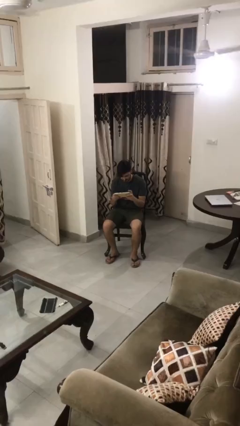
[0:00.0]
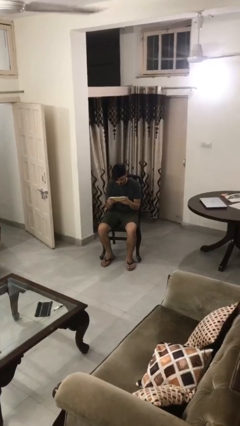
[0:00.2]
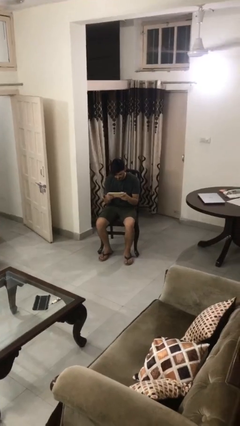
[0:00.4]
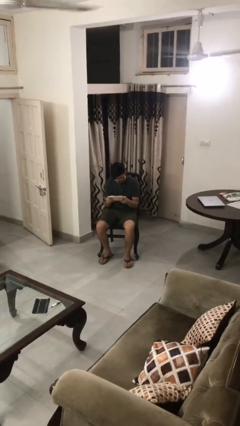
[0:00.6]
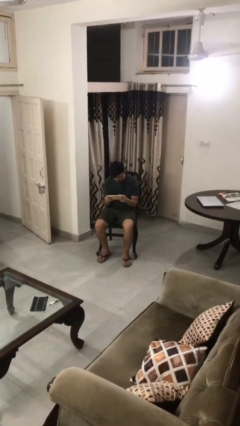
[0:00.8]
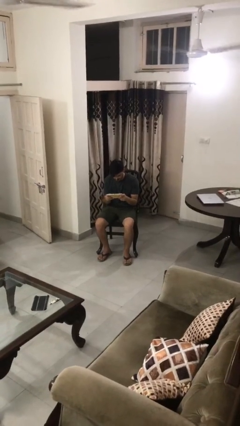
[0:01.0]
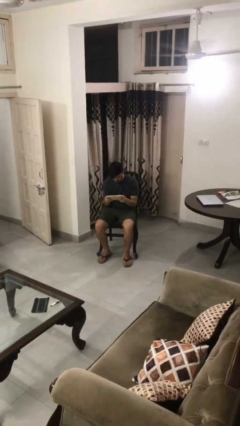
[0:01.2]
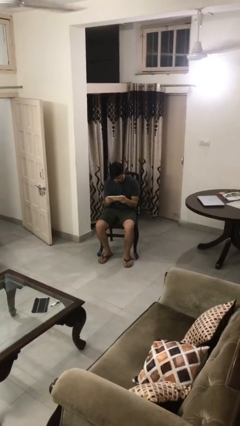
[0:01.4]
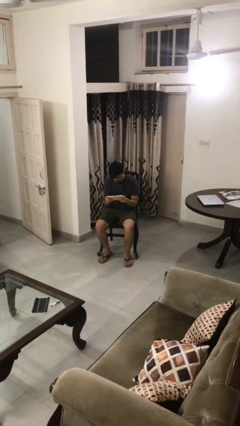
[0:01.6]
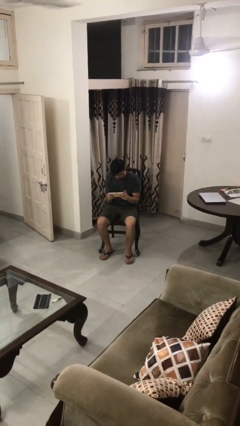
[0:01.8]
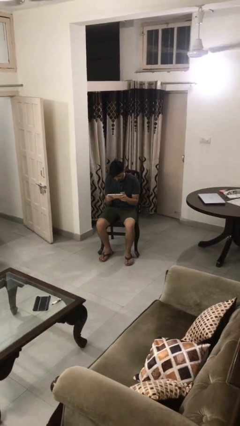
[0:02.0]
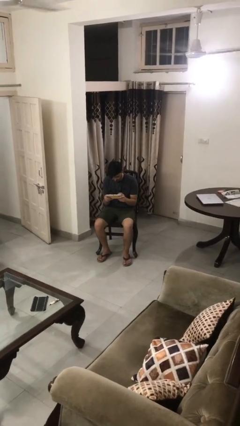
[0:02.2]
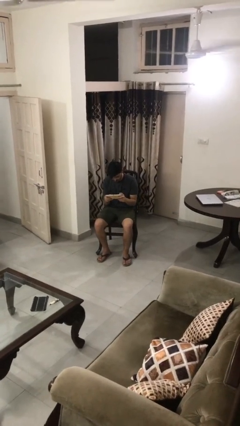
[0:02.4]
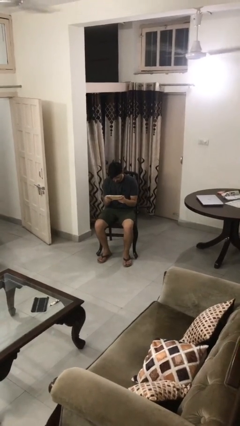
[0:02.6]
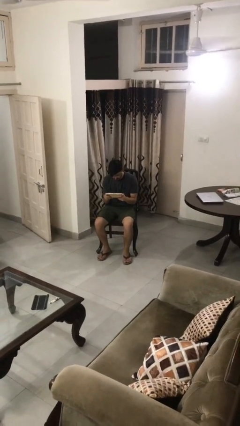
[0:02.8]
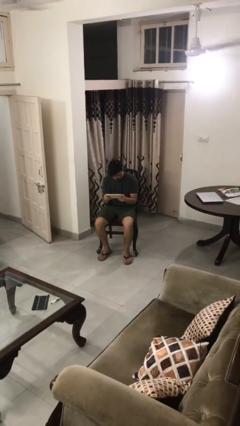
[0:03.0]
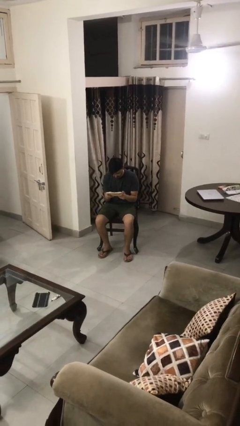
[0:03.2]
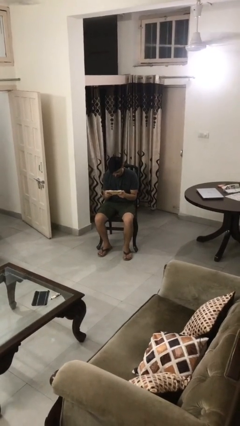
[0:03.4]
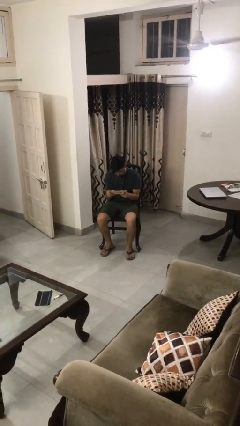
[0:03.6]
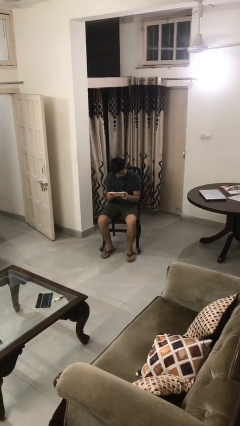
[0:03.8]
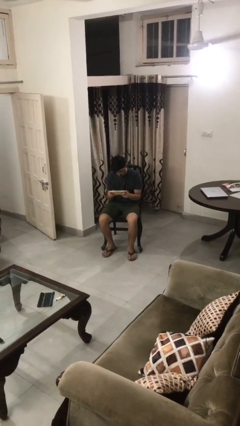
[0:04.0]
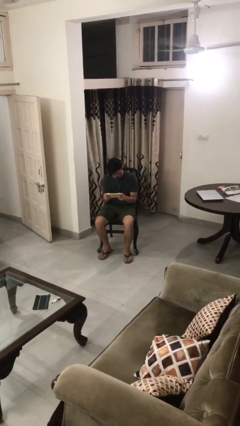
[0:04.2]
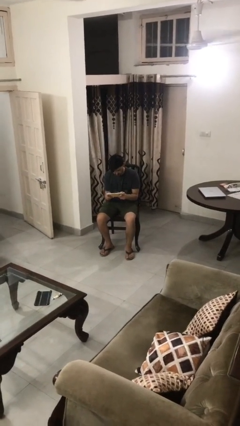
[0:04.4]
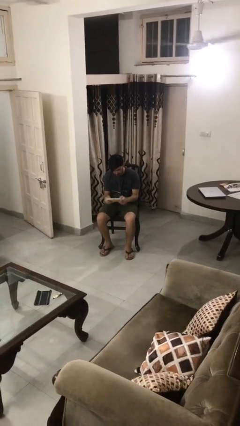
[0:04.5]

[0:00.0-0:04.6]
person interacts with handheld game

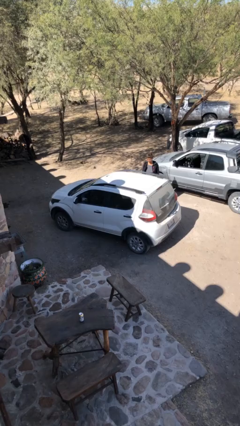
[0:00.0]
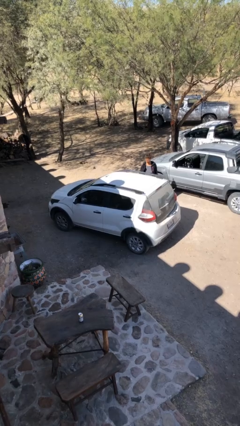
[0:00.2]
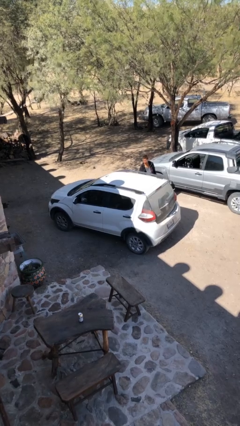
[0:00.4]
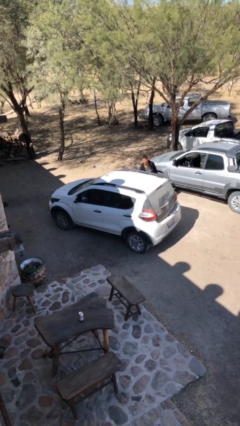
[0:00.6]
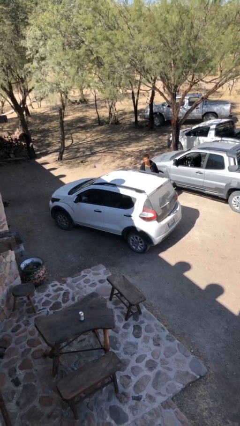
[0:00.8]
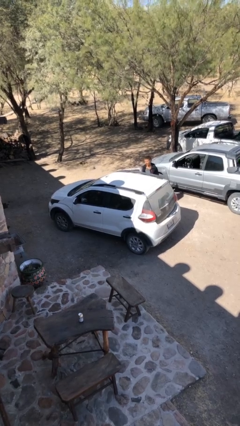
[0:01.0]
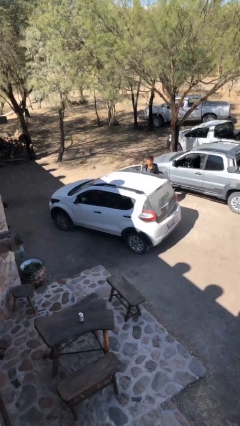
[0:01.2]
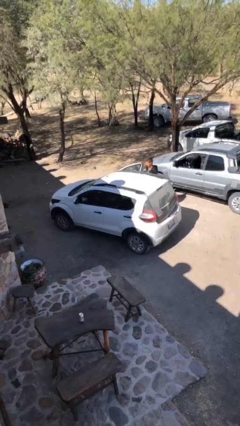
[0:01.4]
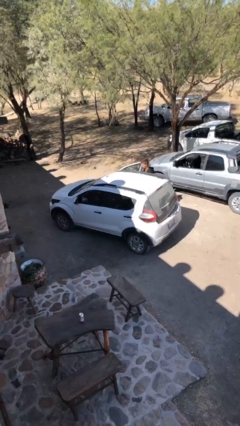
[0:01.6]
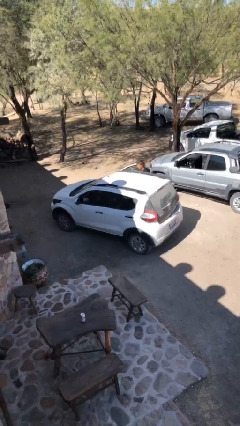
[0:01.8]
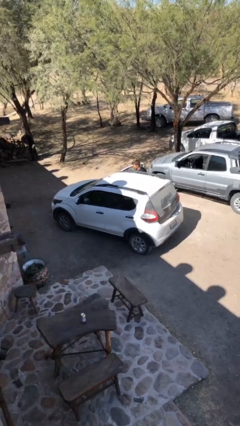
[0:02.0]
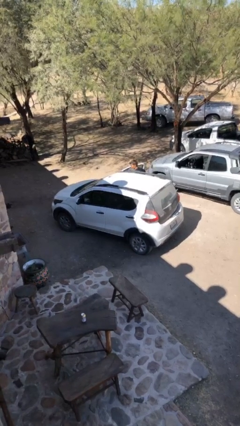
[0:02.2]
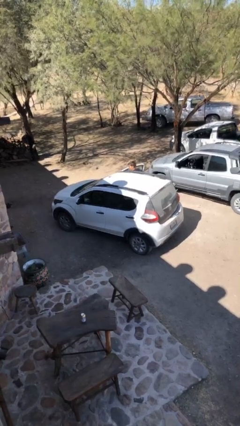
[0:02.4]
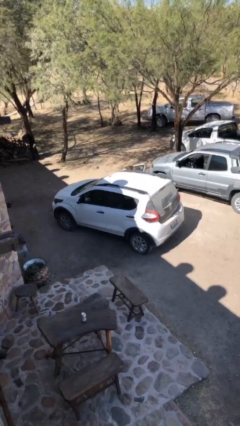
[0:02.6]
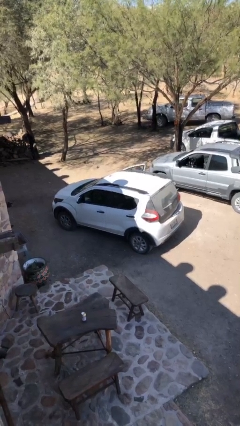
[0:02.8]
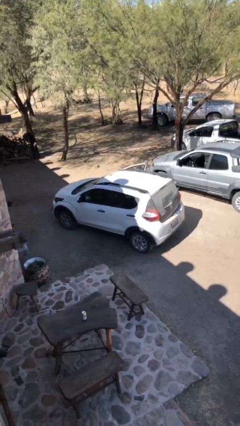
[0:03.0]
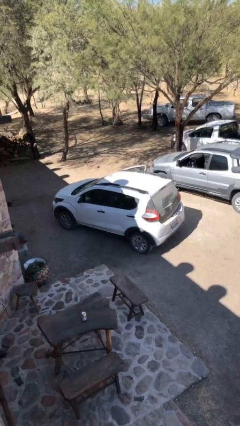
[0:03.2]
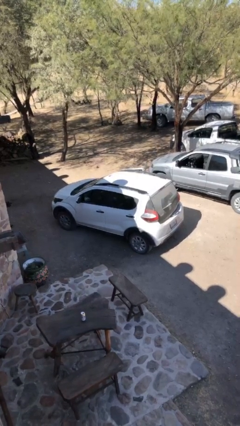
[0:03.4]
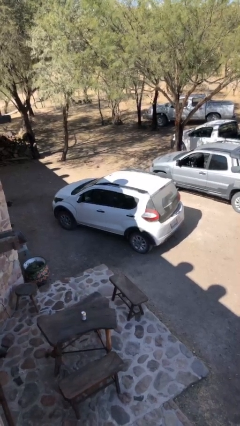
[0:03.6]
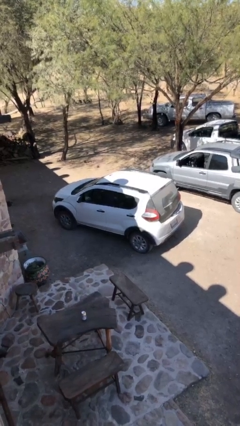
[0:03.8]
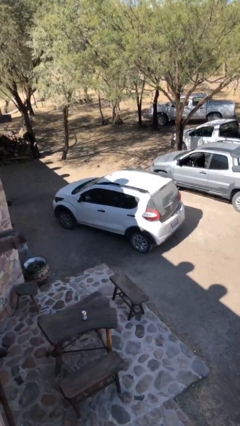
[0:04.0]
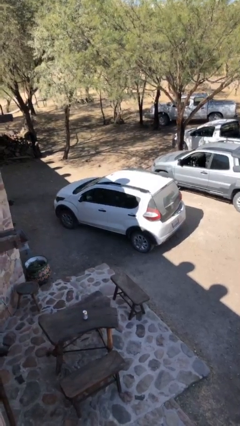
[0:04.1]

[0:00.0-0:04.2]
car picks up person

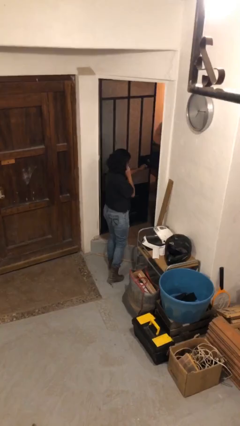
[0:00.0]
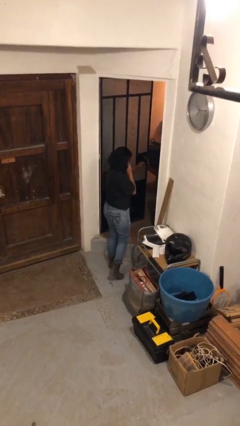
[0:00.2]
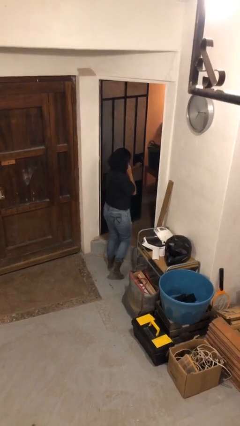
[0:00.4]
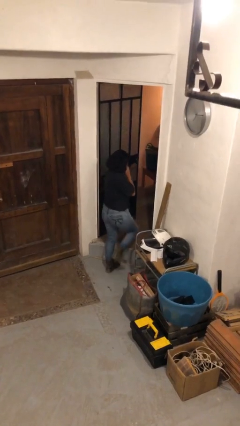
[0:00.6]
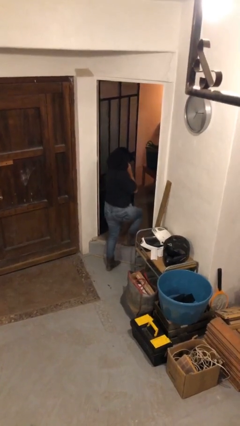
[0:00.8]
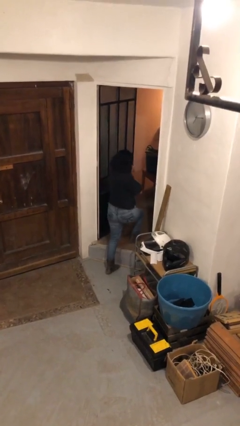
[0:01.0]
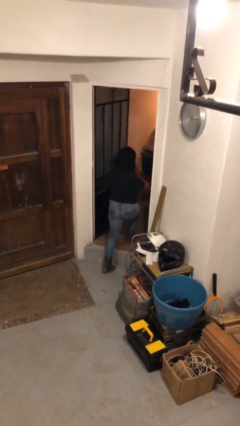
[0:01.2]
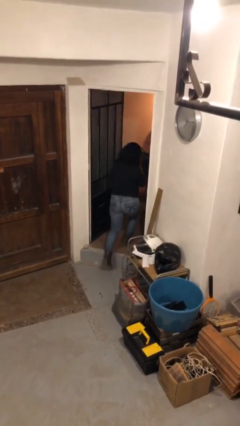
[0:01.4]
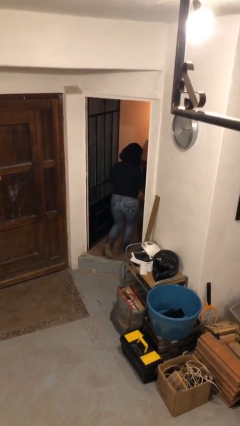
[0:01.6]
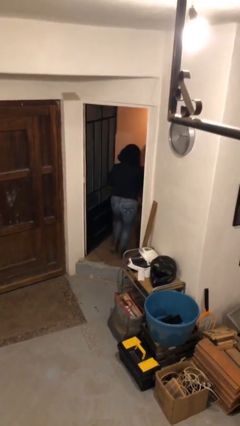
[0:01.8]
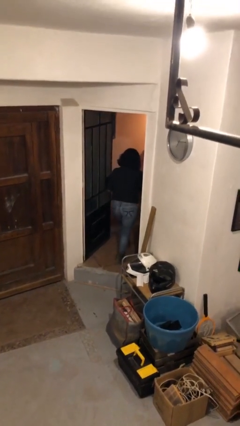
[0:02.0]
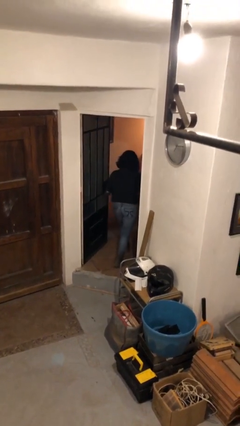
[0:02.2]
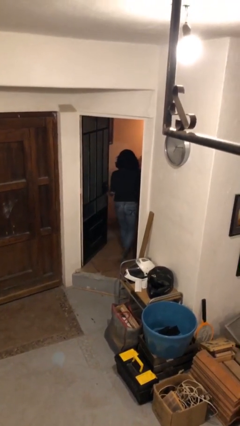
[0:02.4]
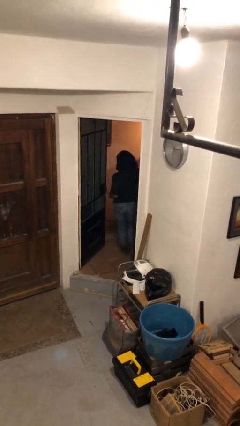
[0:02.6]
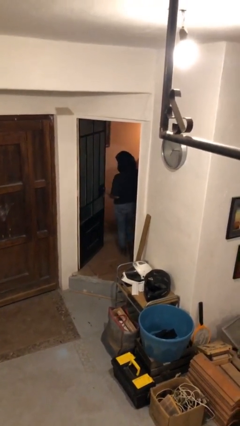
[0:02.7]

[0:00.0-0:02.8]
person exits scene through structure

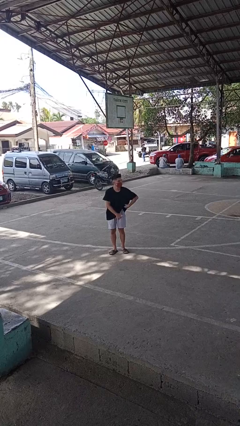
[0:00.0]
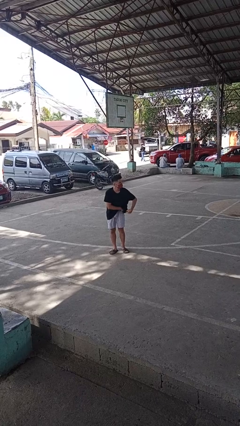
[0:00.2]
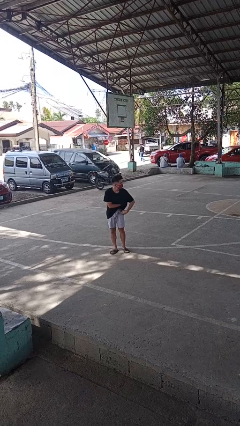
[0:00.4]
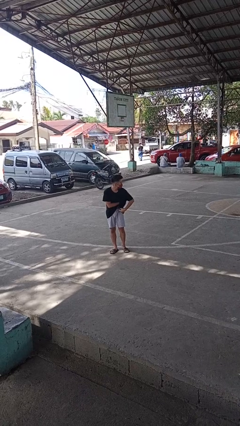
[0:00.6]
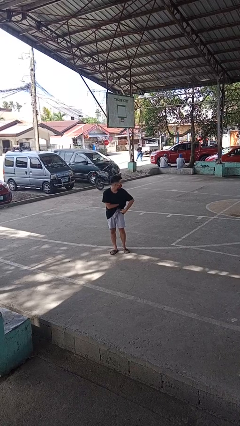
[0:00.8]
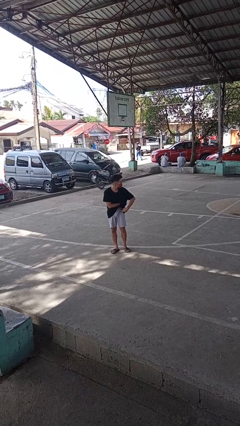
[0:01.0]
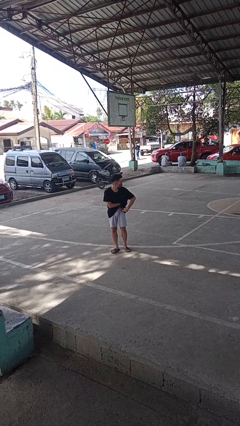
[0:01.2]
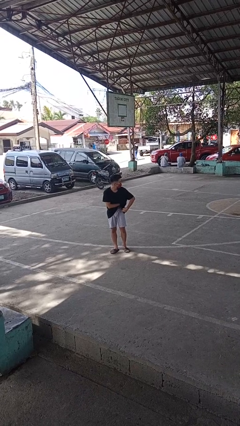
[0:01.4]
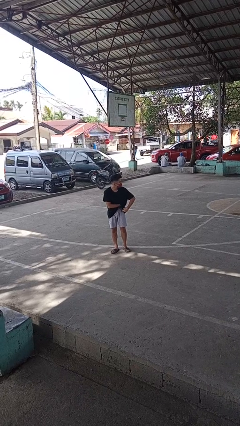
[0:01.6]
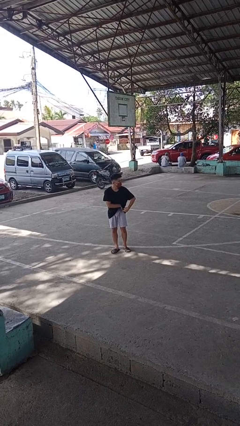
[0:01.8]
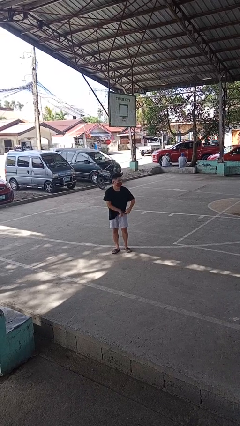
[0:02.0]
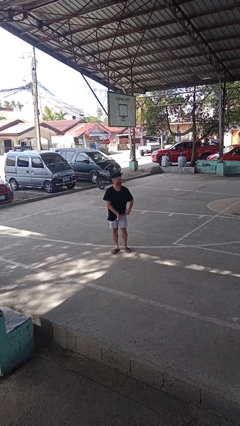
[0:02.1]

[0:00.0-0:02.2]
person applies deodorant

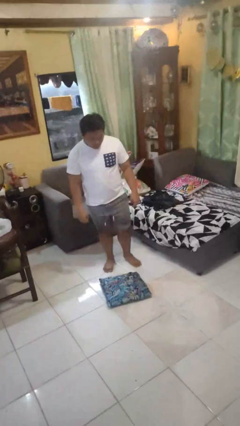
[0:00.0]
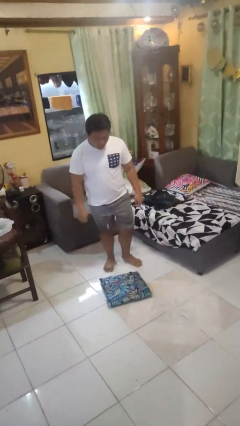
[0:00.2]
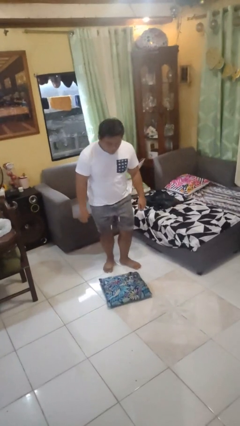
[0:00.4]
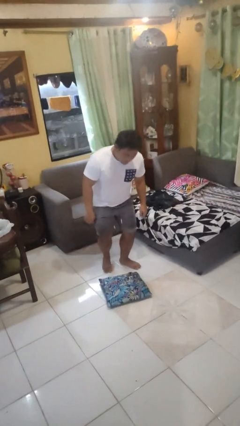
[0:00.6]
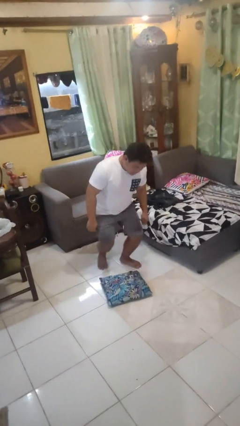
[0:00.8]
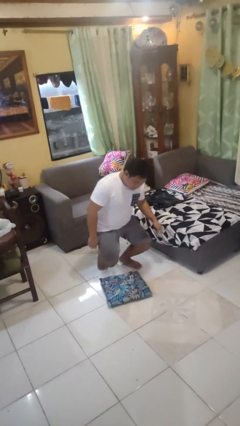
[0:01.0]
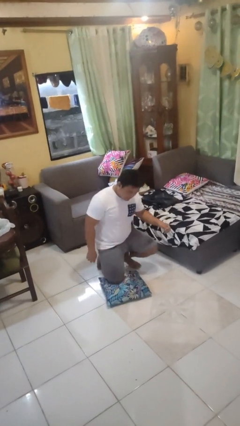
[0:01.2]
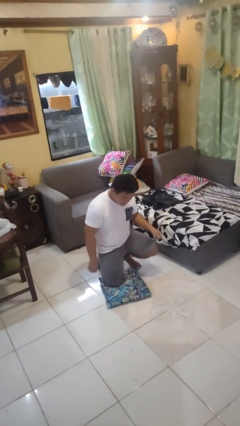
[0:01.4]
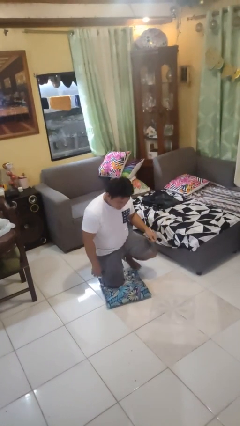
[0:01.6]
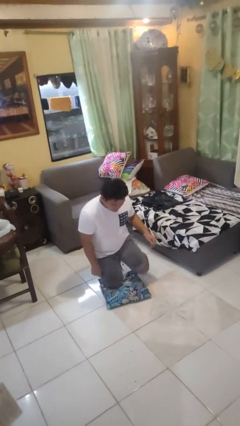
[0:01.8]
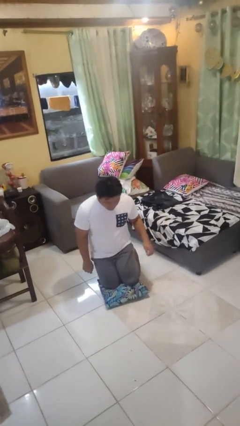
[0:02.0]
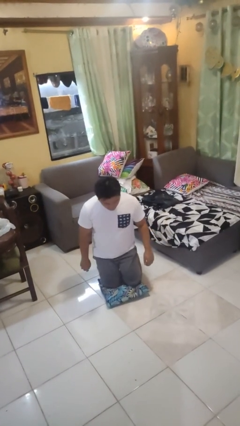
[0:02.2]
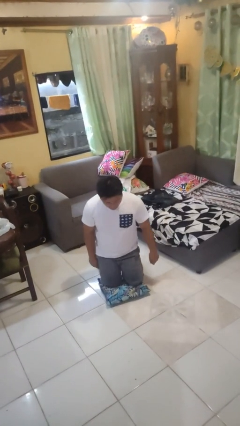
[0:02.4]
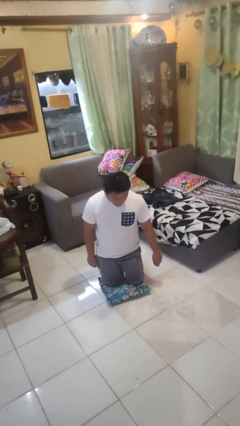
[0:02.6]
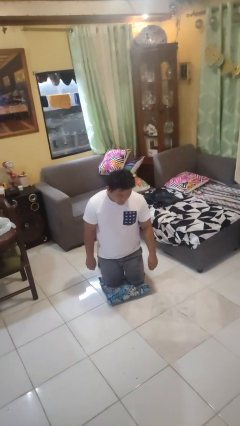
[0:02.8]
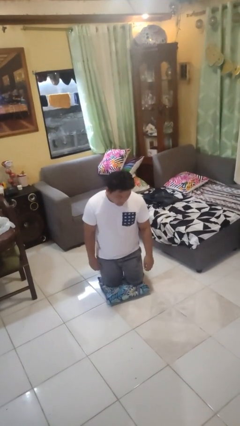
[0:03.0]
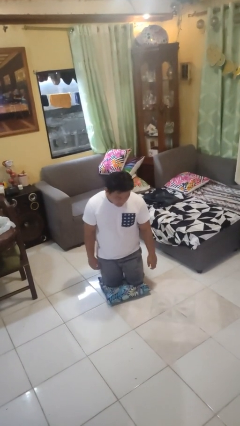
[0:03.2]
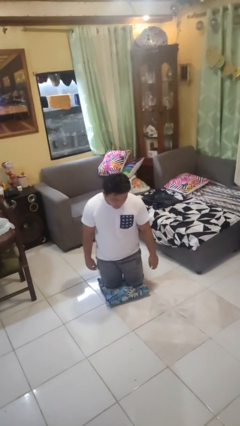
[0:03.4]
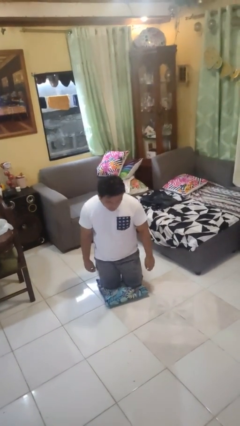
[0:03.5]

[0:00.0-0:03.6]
person kneels
